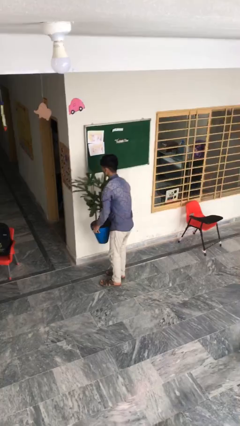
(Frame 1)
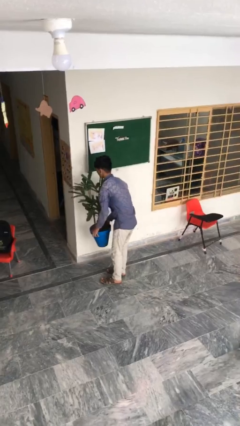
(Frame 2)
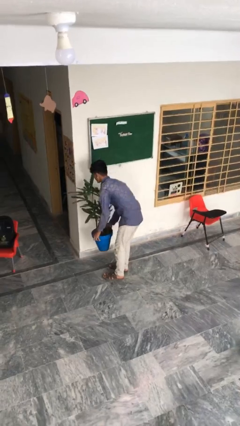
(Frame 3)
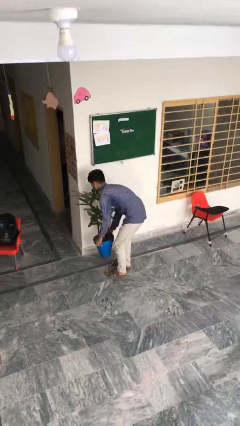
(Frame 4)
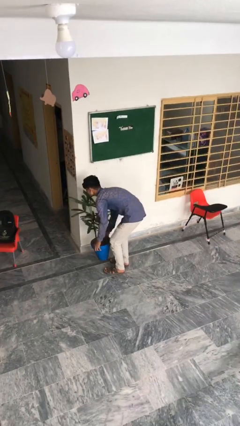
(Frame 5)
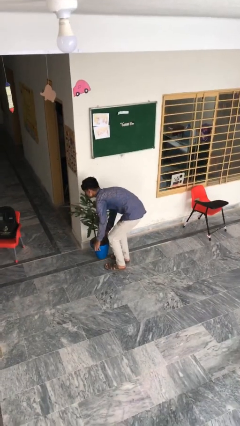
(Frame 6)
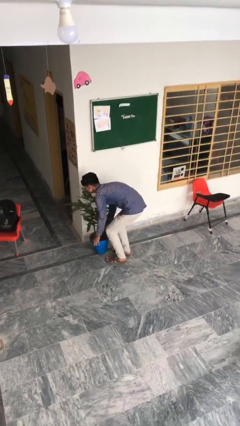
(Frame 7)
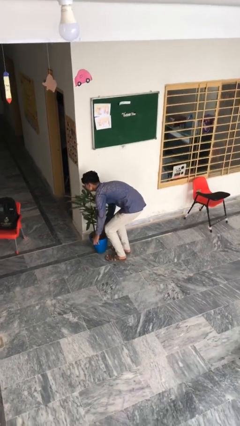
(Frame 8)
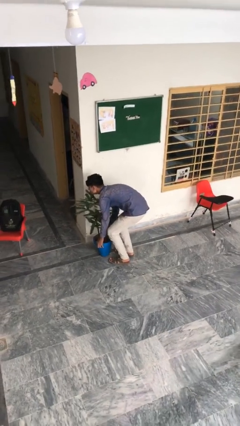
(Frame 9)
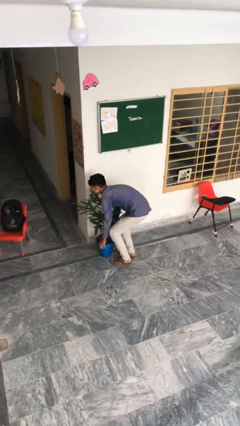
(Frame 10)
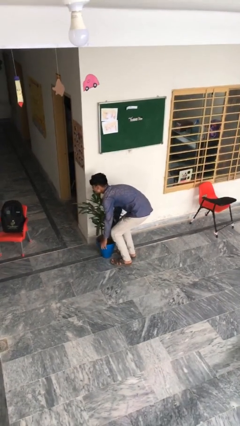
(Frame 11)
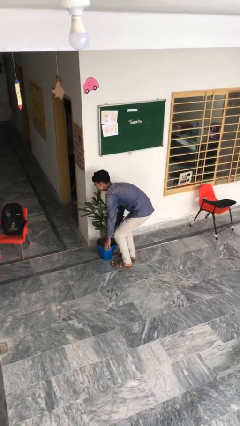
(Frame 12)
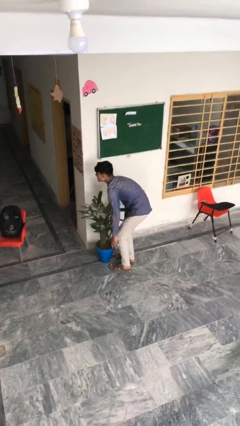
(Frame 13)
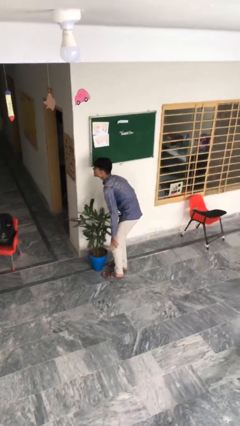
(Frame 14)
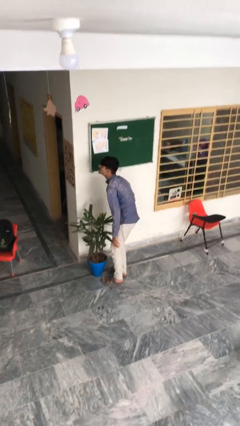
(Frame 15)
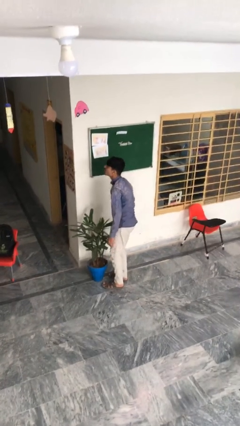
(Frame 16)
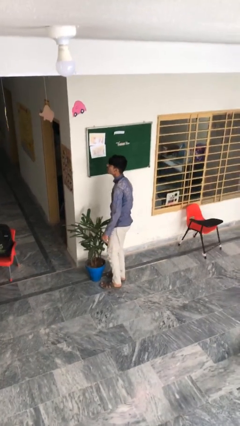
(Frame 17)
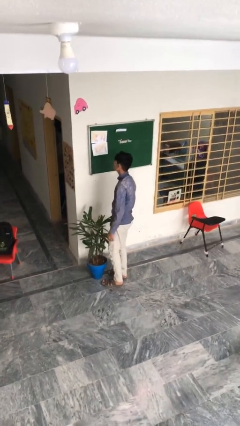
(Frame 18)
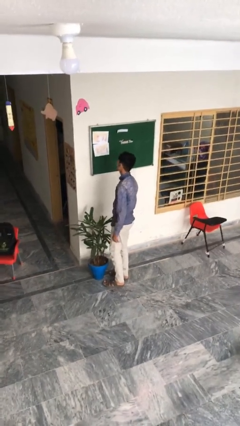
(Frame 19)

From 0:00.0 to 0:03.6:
person puts down object on floor

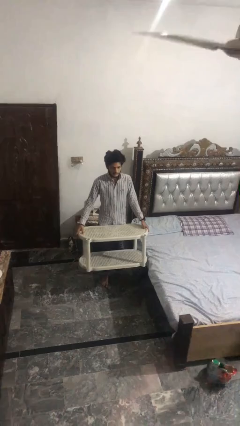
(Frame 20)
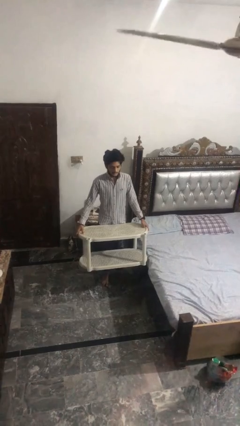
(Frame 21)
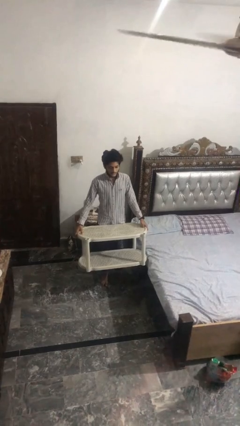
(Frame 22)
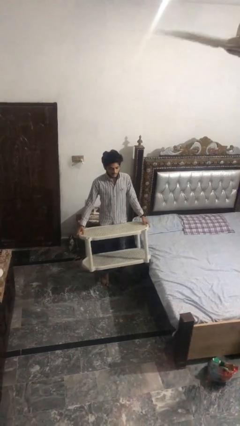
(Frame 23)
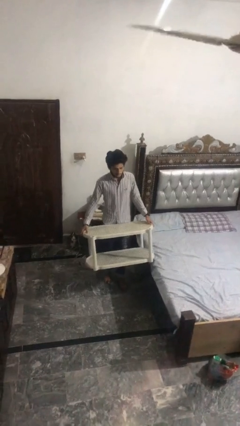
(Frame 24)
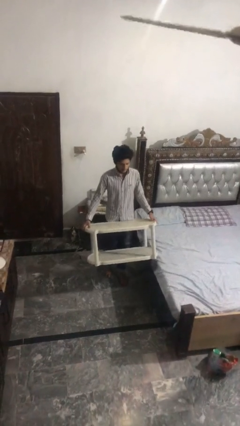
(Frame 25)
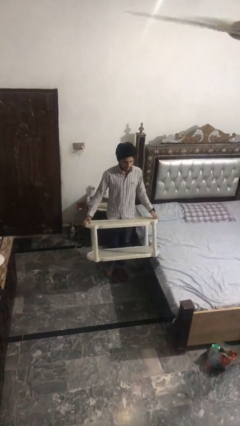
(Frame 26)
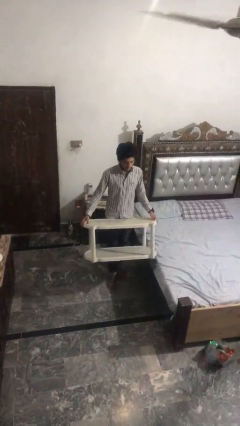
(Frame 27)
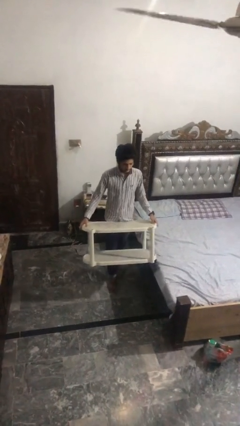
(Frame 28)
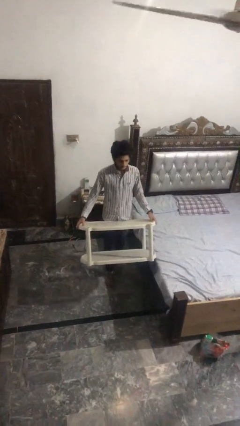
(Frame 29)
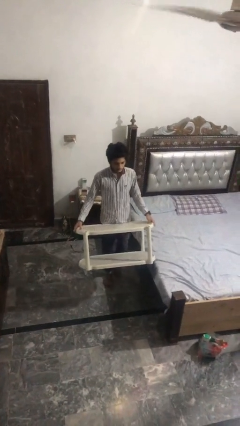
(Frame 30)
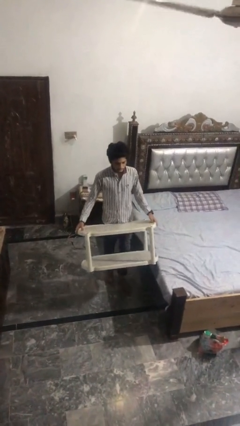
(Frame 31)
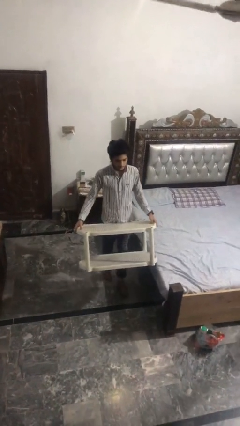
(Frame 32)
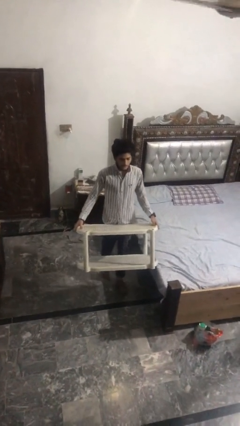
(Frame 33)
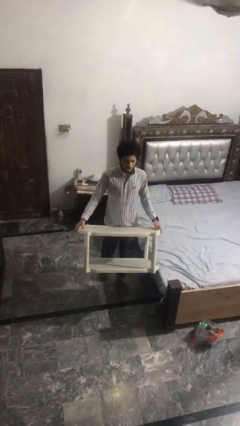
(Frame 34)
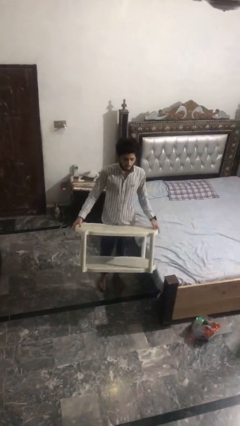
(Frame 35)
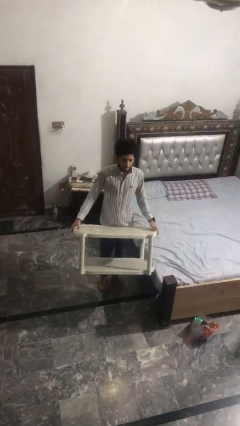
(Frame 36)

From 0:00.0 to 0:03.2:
person carries furniture

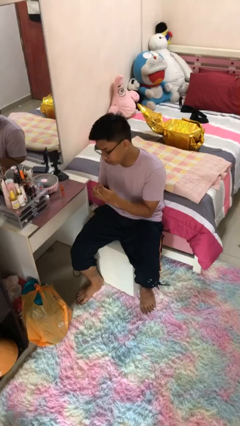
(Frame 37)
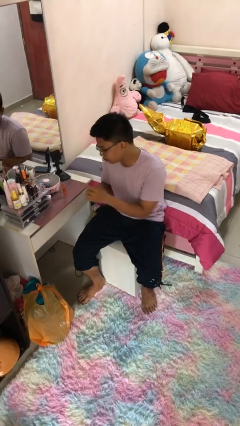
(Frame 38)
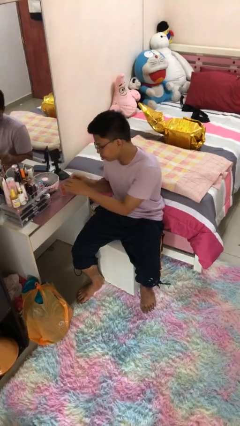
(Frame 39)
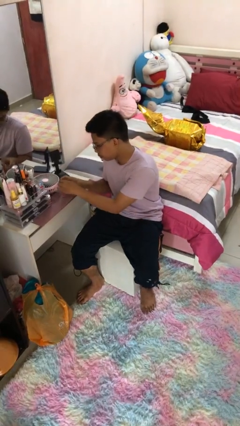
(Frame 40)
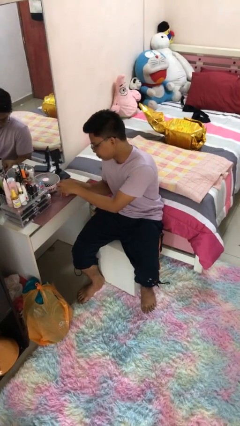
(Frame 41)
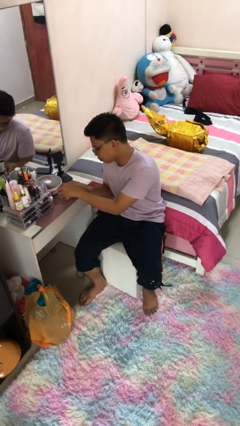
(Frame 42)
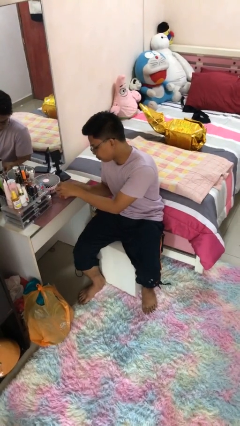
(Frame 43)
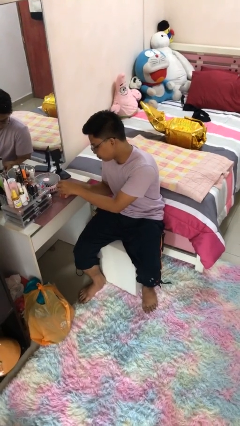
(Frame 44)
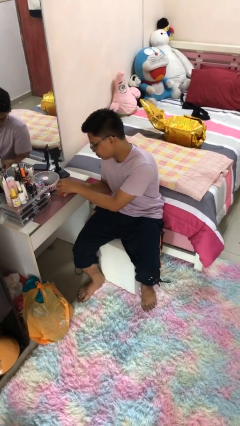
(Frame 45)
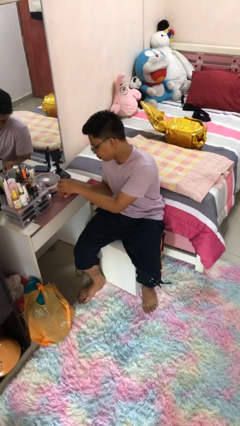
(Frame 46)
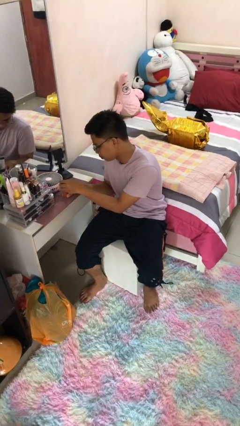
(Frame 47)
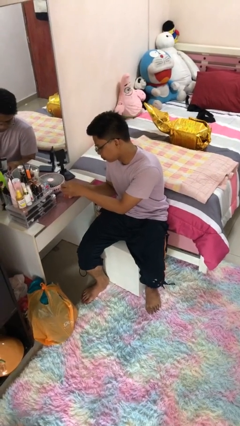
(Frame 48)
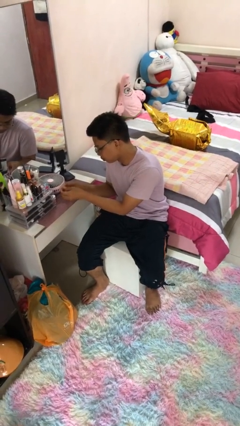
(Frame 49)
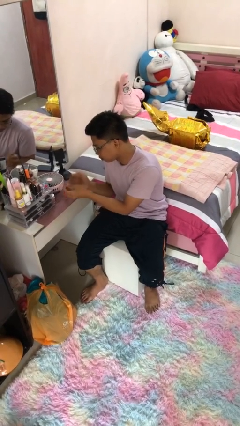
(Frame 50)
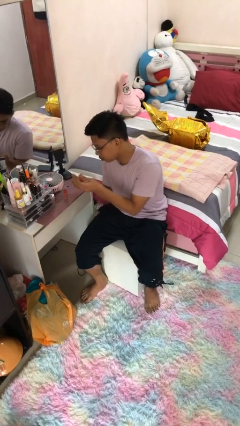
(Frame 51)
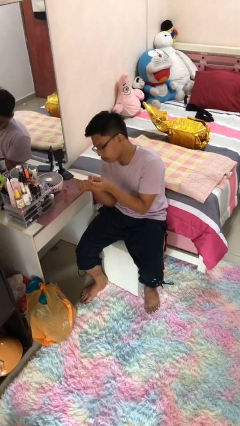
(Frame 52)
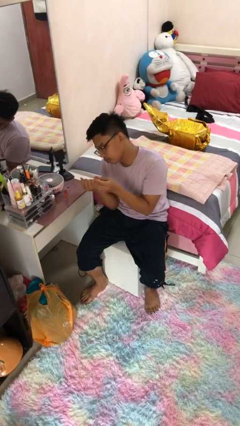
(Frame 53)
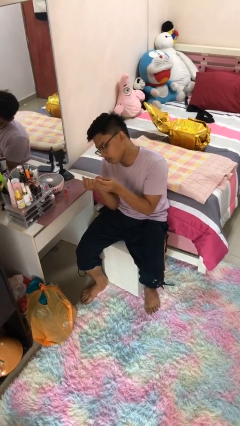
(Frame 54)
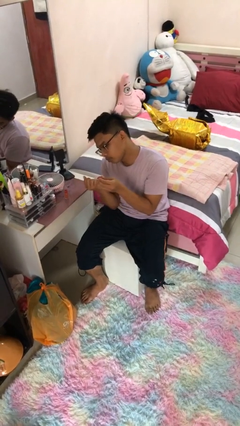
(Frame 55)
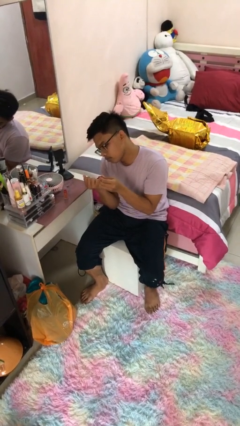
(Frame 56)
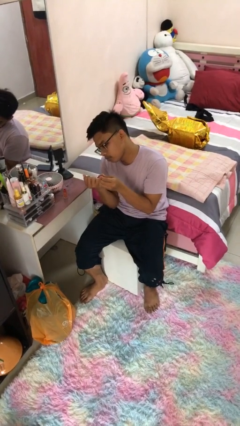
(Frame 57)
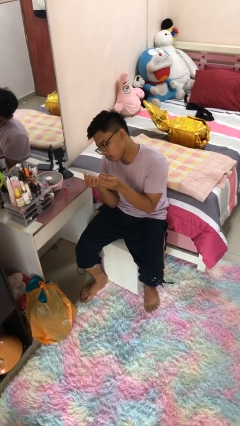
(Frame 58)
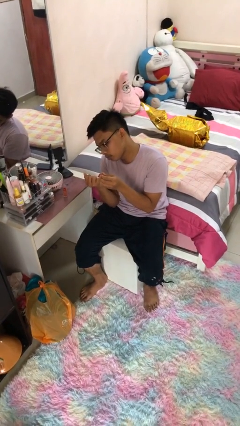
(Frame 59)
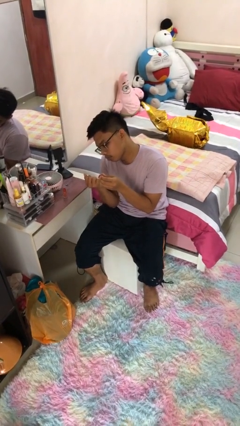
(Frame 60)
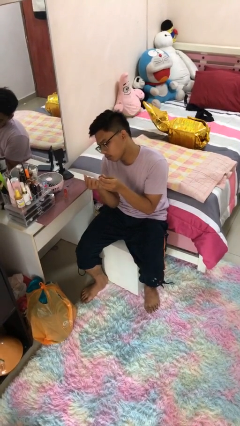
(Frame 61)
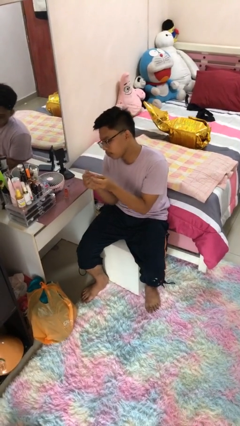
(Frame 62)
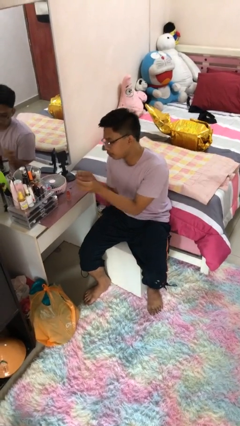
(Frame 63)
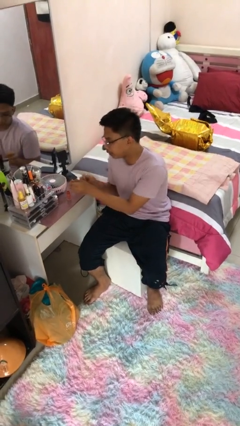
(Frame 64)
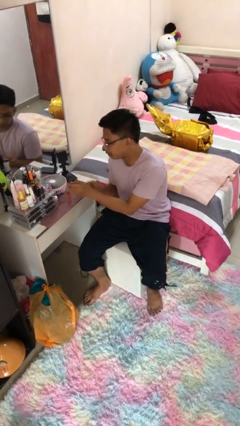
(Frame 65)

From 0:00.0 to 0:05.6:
person paints fingernails

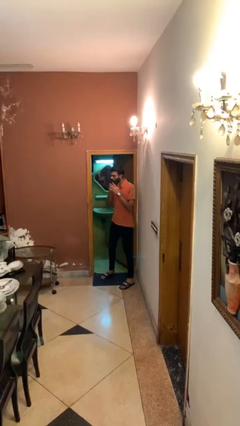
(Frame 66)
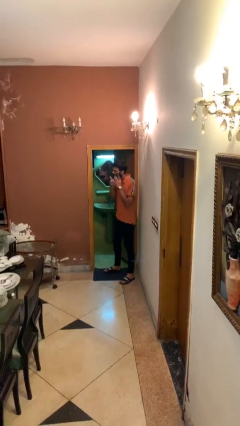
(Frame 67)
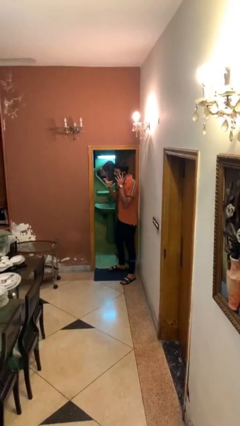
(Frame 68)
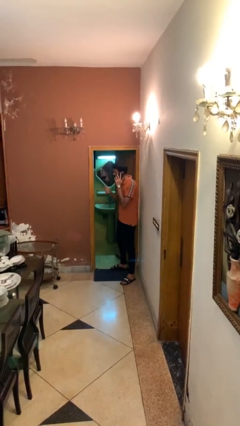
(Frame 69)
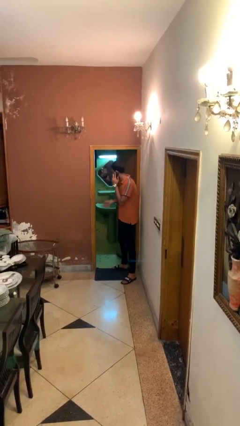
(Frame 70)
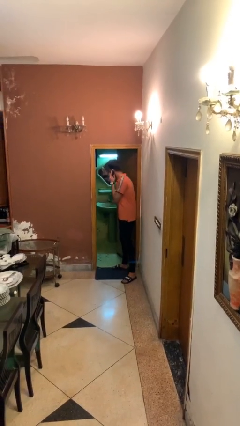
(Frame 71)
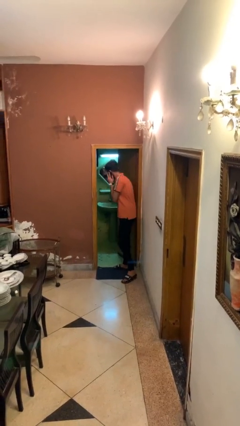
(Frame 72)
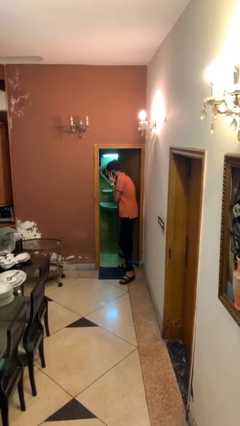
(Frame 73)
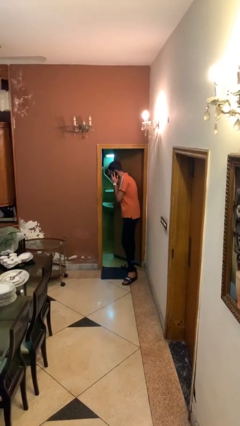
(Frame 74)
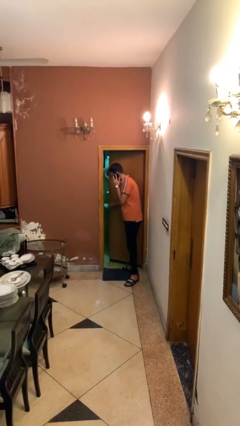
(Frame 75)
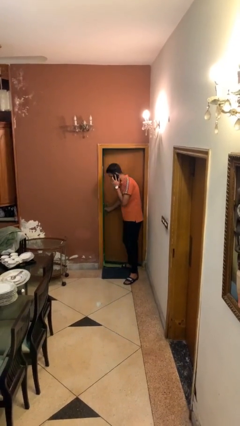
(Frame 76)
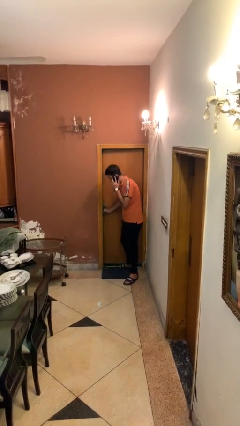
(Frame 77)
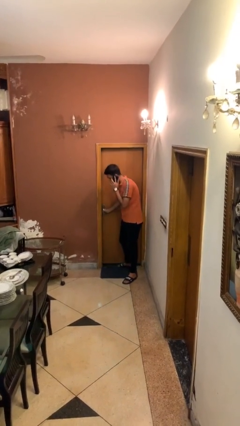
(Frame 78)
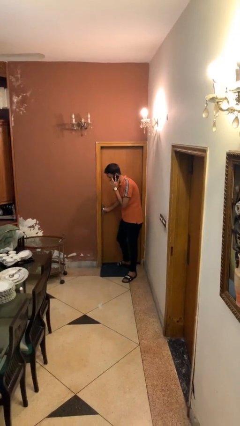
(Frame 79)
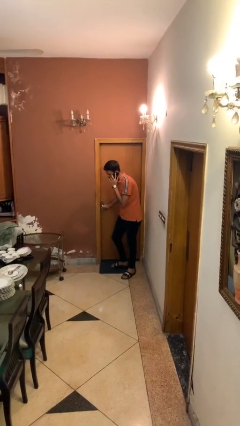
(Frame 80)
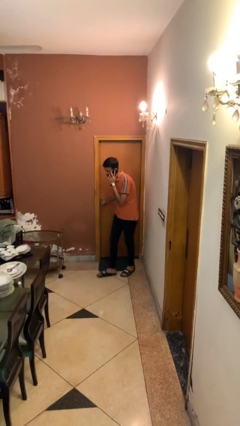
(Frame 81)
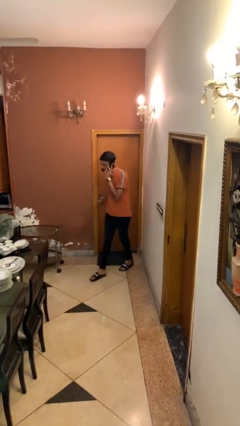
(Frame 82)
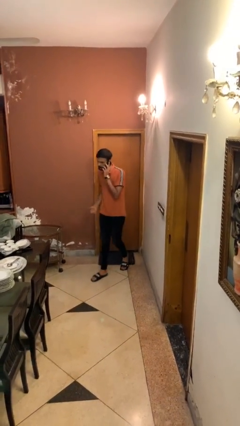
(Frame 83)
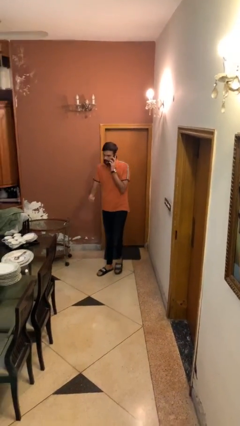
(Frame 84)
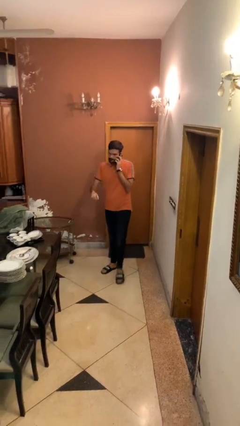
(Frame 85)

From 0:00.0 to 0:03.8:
person closes facility door

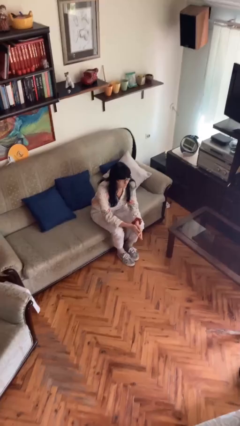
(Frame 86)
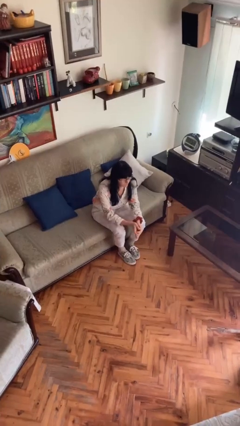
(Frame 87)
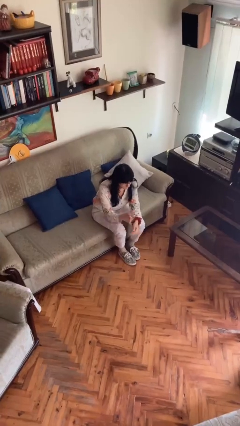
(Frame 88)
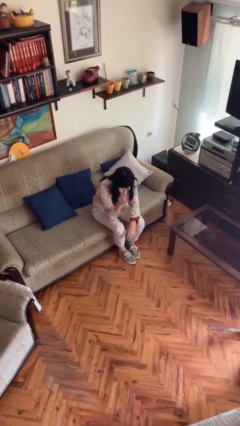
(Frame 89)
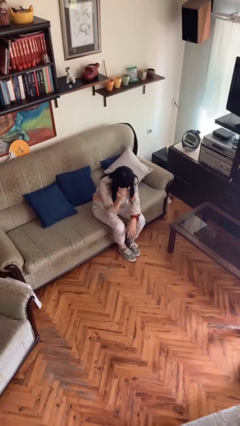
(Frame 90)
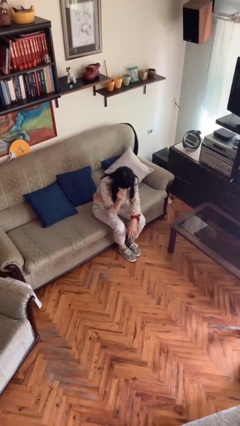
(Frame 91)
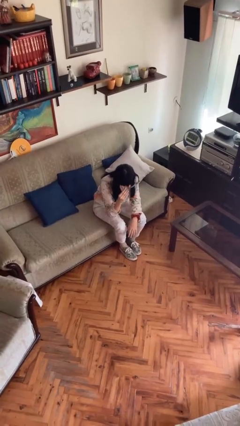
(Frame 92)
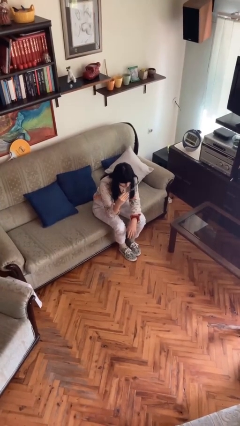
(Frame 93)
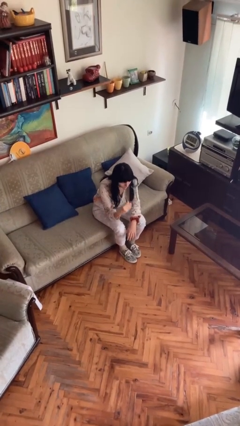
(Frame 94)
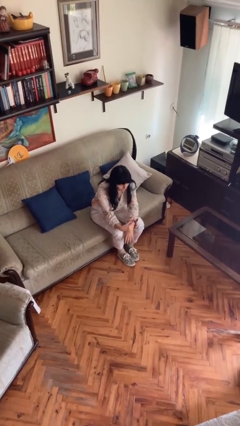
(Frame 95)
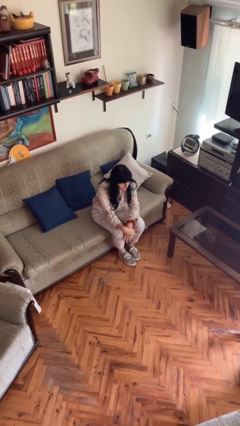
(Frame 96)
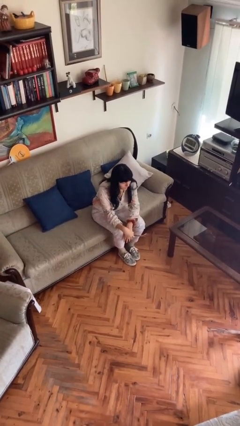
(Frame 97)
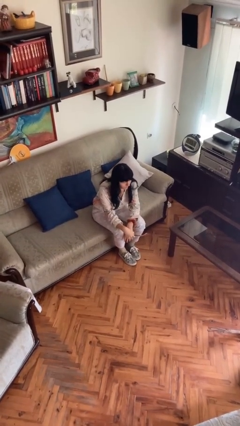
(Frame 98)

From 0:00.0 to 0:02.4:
person takes off glasses
